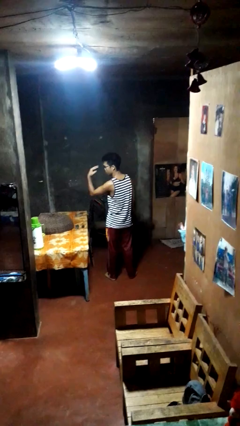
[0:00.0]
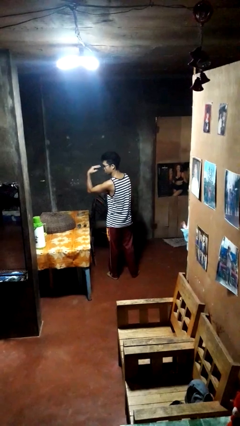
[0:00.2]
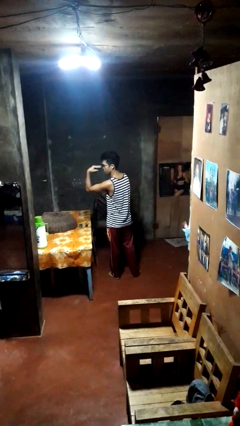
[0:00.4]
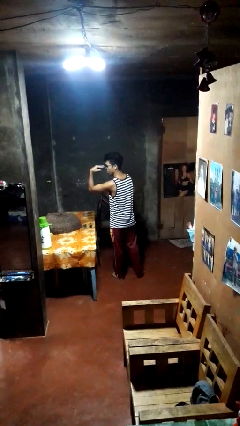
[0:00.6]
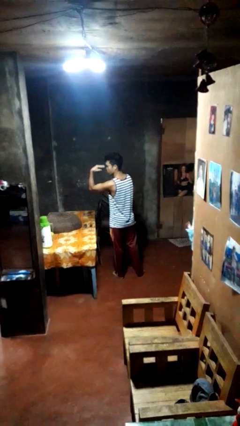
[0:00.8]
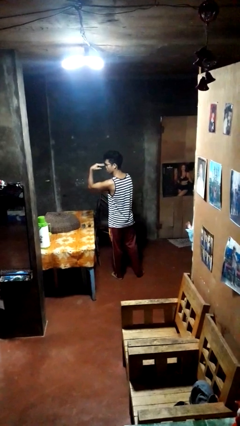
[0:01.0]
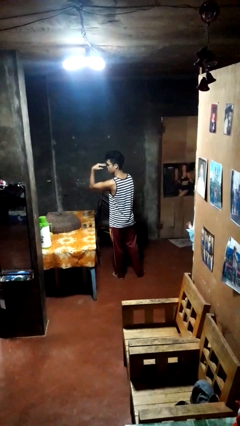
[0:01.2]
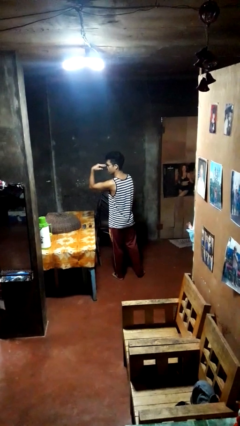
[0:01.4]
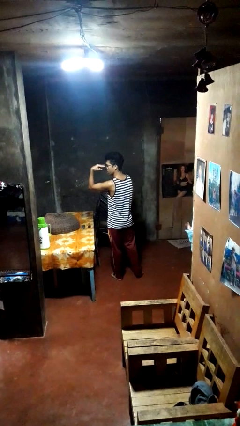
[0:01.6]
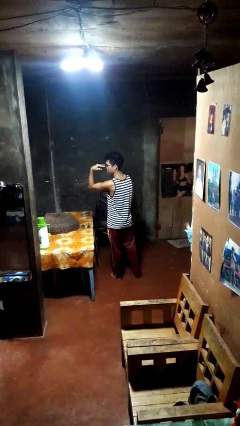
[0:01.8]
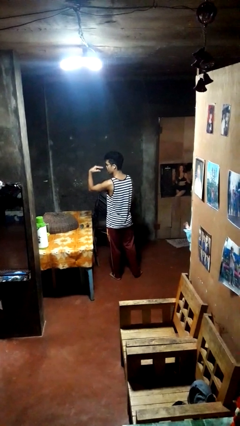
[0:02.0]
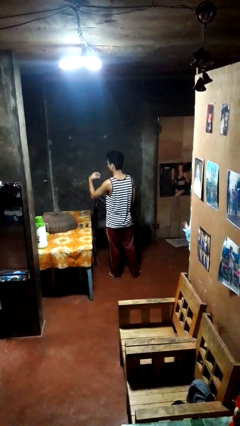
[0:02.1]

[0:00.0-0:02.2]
person gestures watch closely

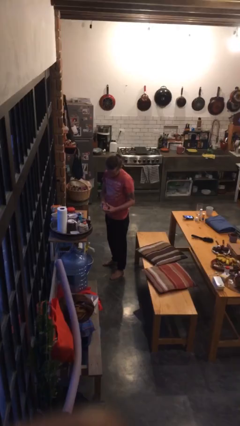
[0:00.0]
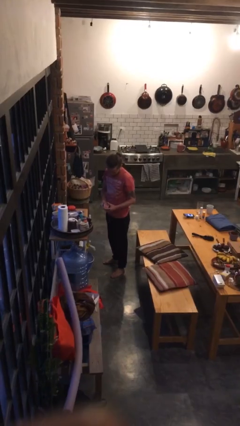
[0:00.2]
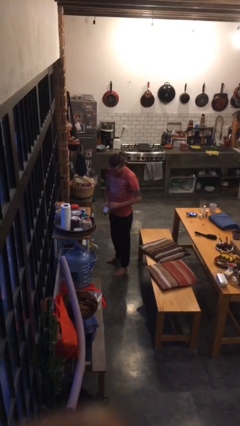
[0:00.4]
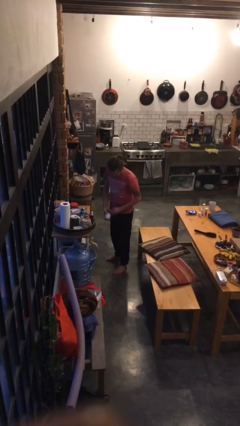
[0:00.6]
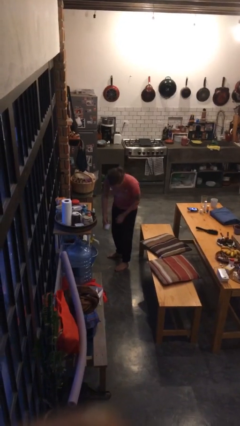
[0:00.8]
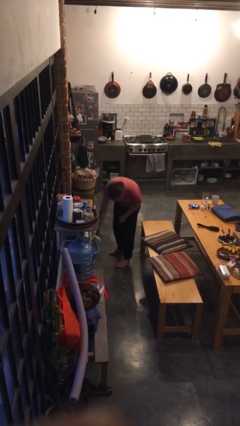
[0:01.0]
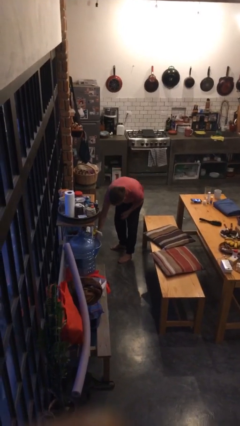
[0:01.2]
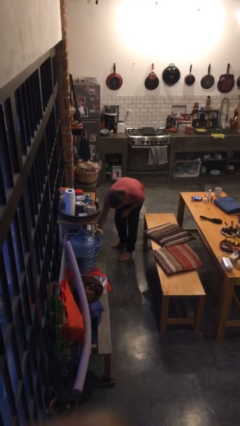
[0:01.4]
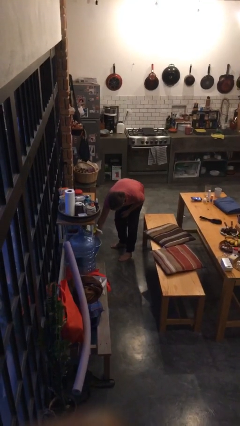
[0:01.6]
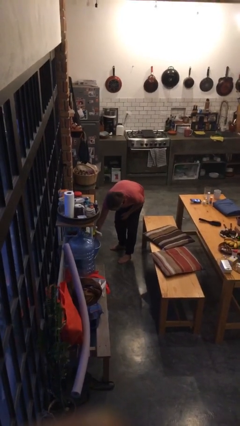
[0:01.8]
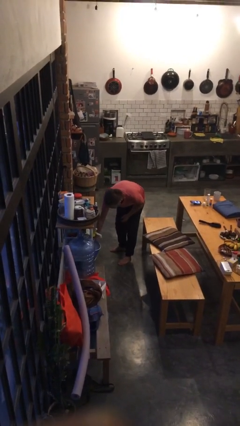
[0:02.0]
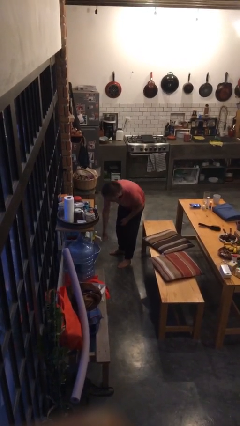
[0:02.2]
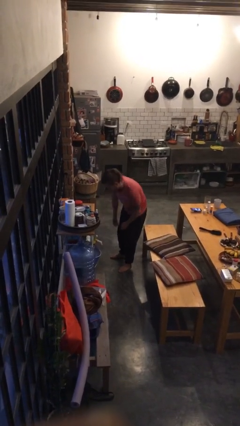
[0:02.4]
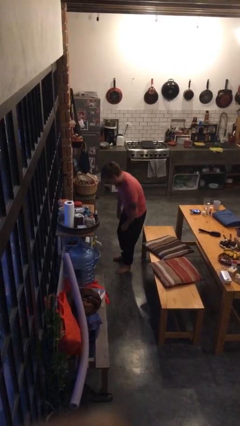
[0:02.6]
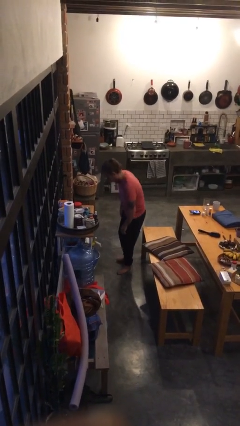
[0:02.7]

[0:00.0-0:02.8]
person puts down object into cabinet

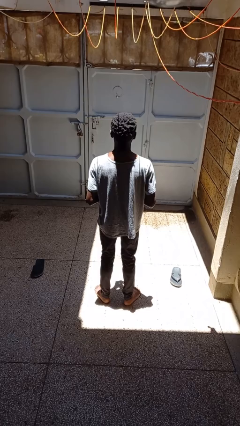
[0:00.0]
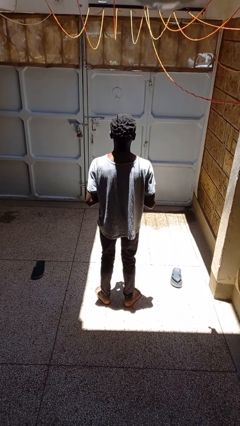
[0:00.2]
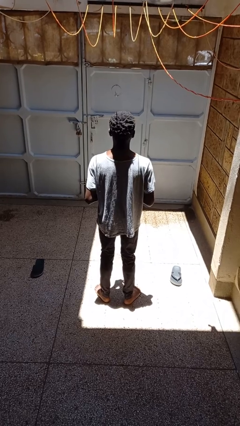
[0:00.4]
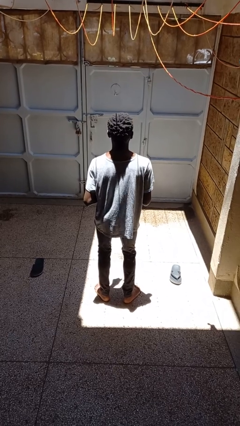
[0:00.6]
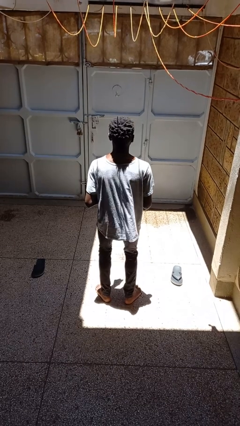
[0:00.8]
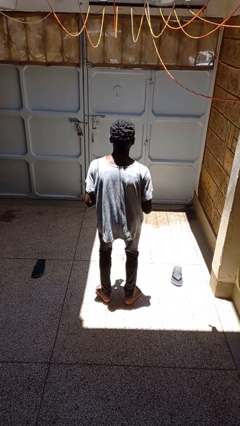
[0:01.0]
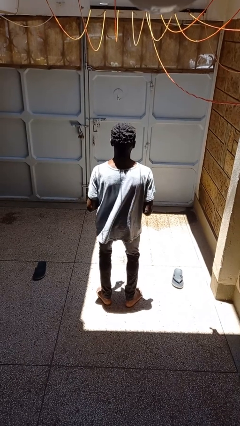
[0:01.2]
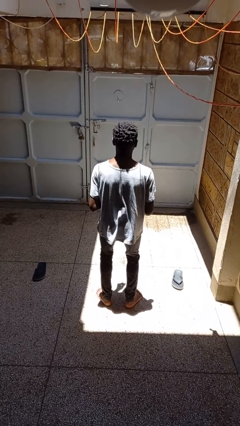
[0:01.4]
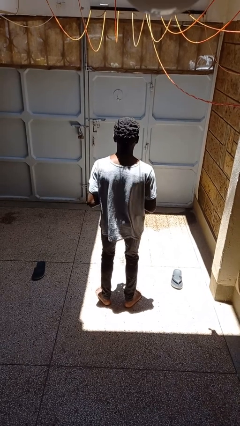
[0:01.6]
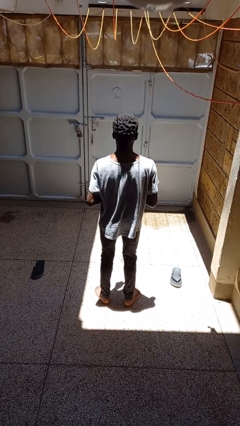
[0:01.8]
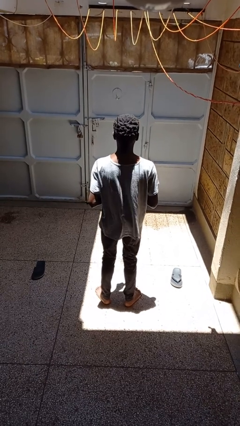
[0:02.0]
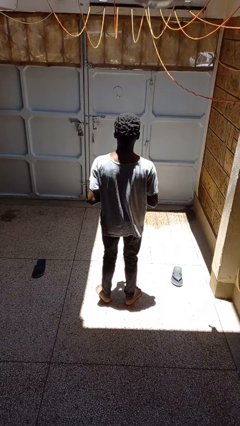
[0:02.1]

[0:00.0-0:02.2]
person dances in place

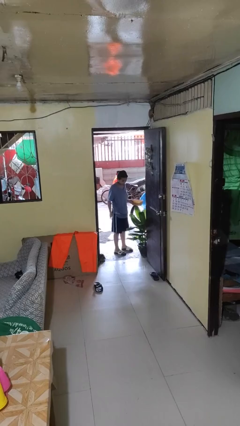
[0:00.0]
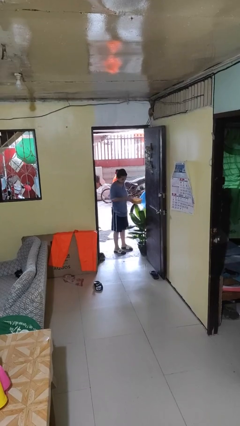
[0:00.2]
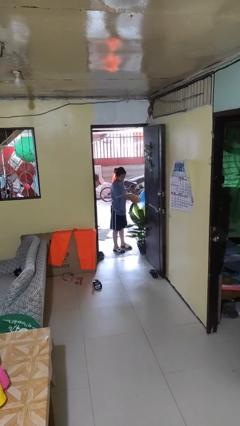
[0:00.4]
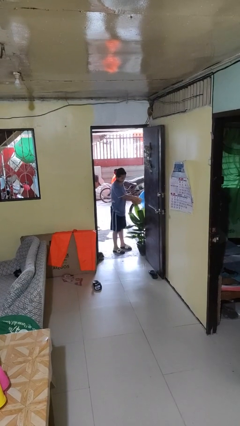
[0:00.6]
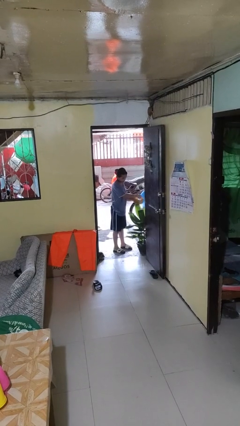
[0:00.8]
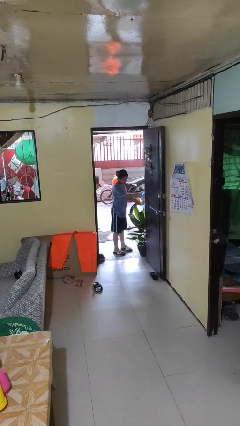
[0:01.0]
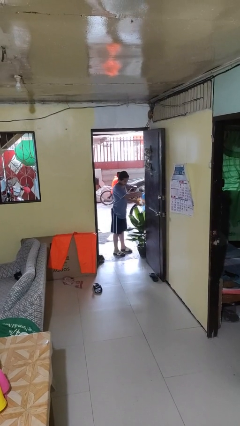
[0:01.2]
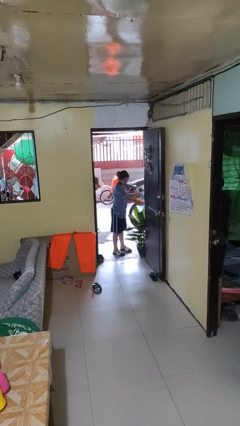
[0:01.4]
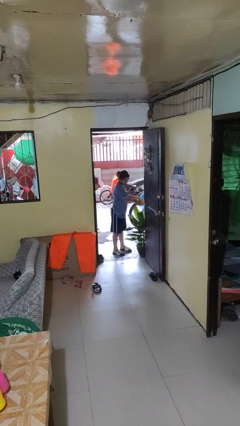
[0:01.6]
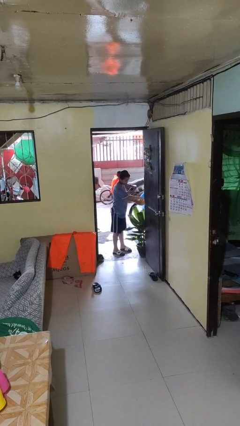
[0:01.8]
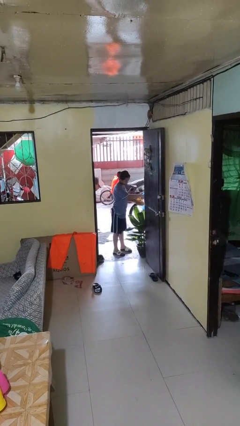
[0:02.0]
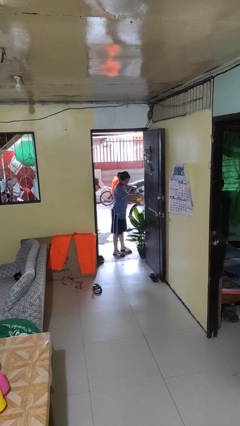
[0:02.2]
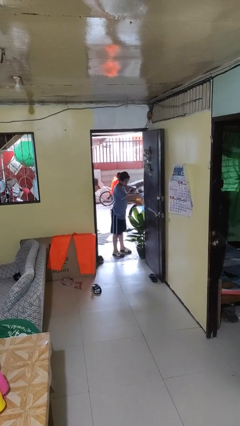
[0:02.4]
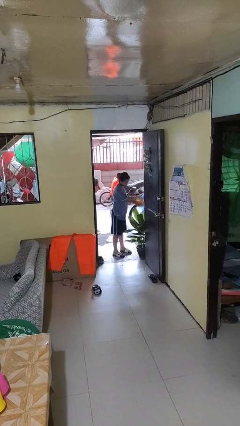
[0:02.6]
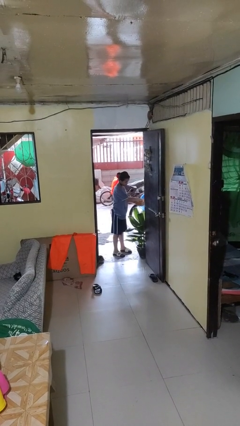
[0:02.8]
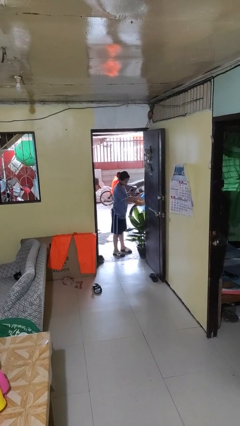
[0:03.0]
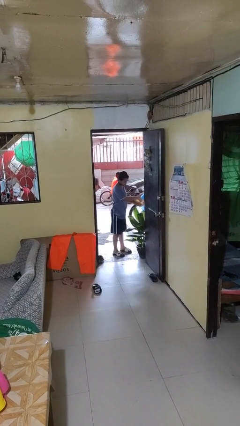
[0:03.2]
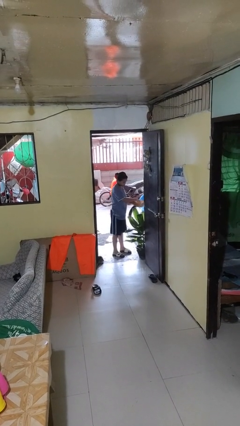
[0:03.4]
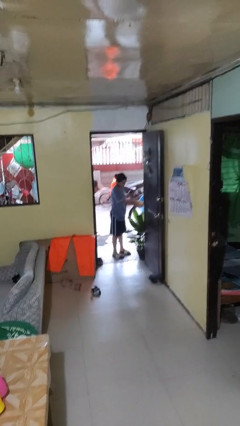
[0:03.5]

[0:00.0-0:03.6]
person waters houseplant

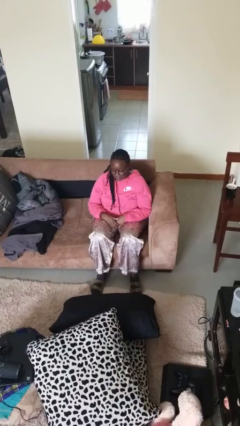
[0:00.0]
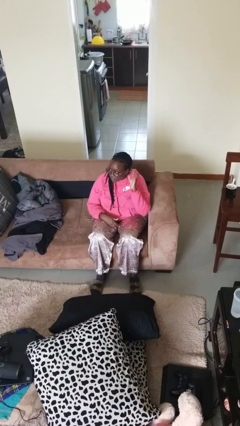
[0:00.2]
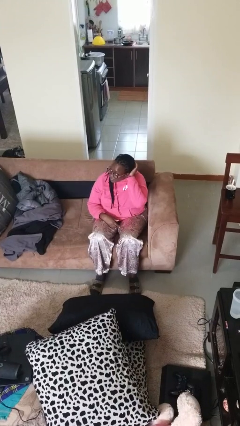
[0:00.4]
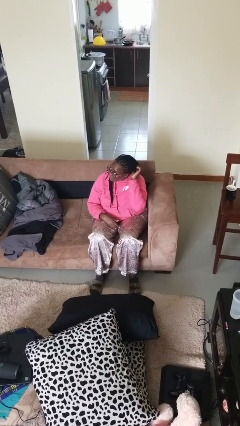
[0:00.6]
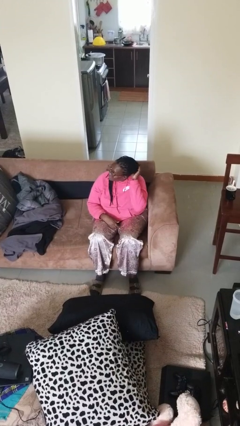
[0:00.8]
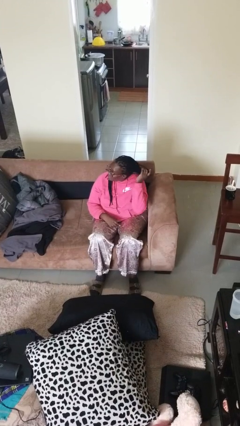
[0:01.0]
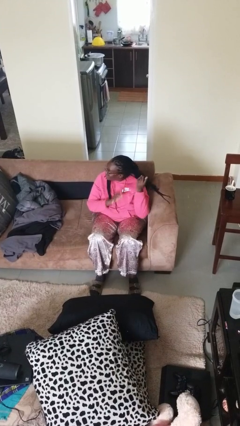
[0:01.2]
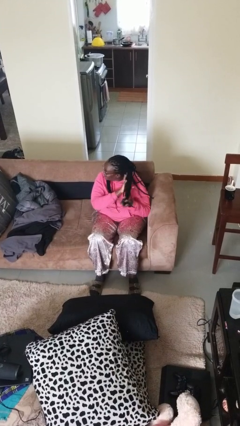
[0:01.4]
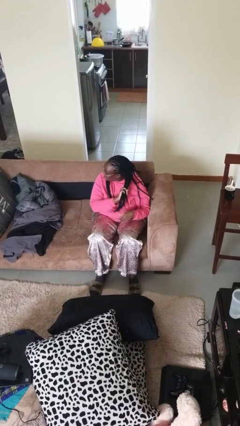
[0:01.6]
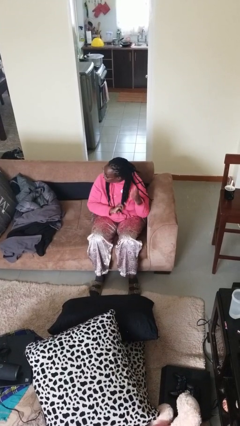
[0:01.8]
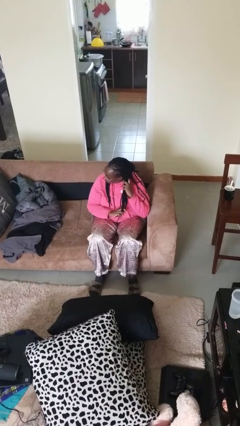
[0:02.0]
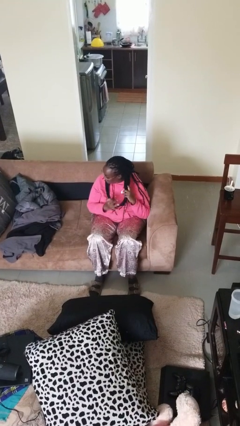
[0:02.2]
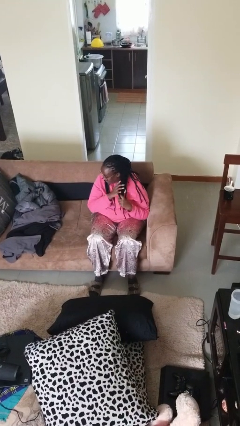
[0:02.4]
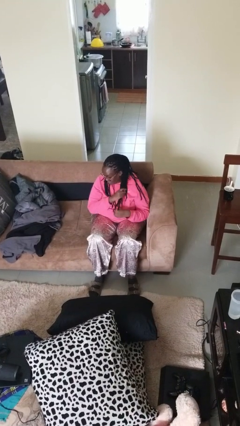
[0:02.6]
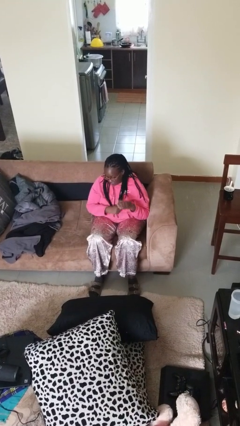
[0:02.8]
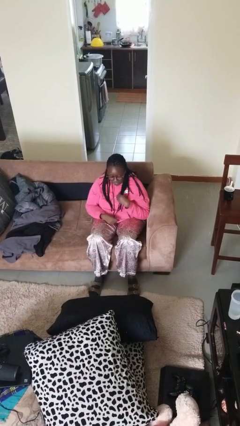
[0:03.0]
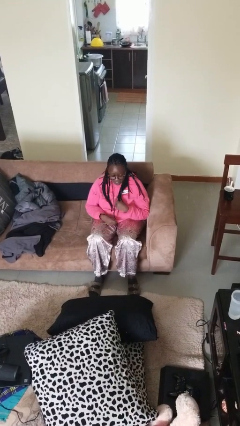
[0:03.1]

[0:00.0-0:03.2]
person strokes hair

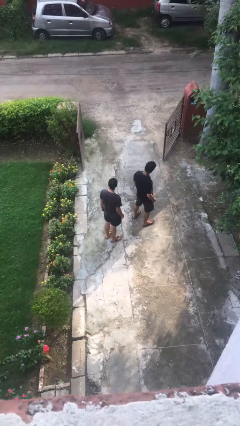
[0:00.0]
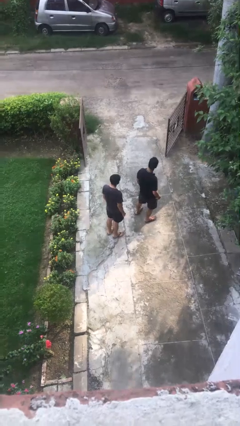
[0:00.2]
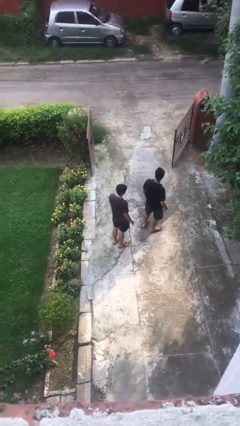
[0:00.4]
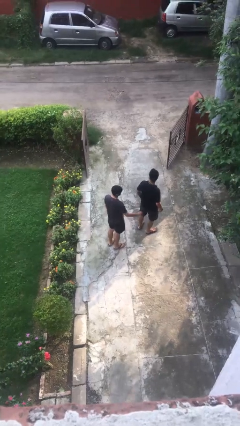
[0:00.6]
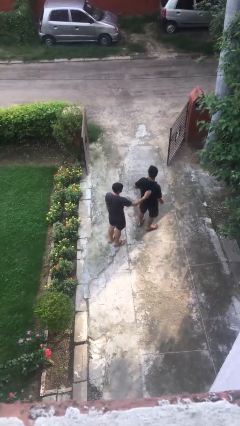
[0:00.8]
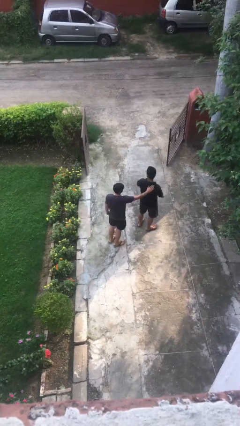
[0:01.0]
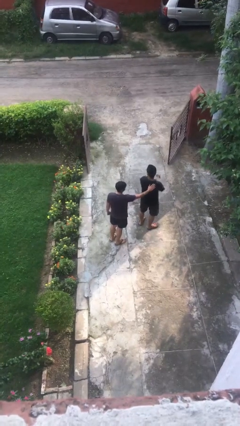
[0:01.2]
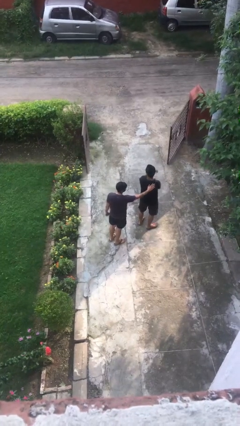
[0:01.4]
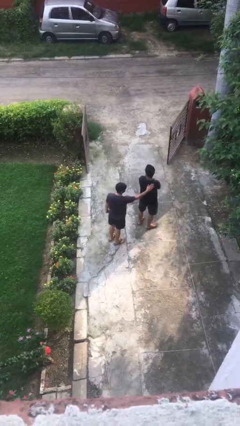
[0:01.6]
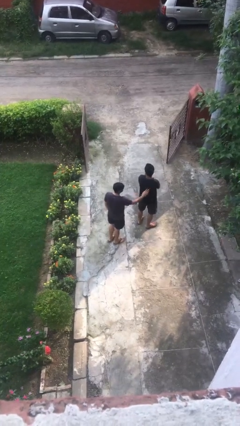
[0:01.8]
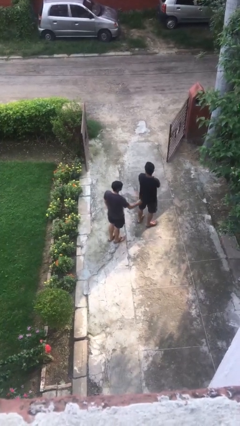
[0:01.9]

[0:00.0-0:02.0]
person touches back of person

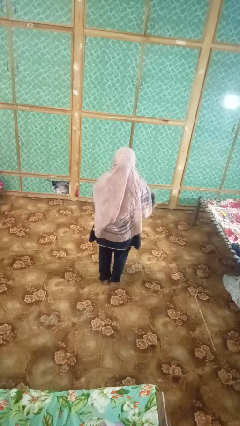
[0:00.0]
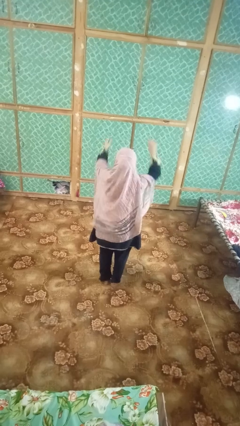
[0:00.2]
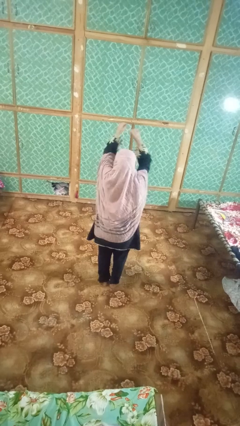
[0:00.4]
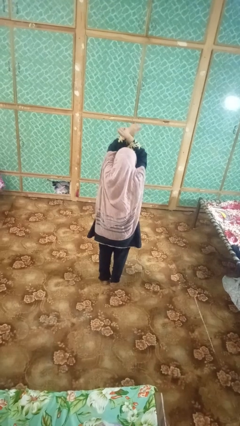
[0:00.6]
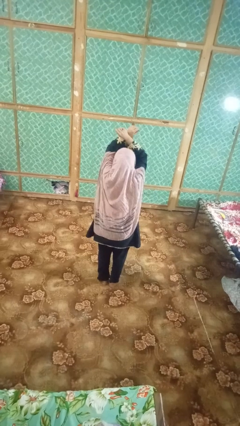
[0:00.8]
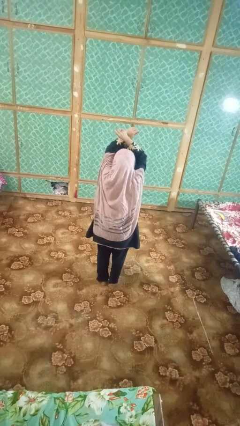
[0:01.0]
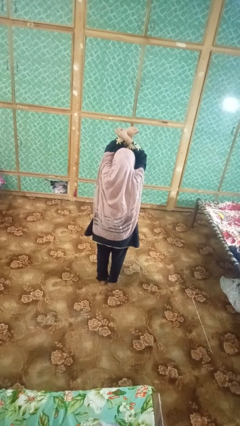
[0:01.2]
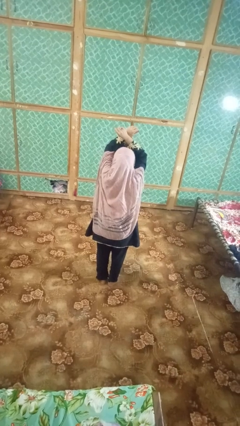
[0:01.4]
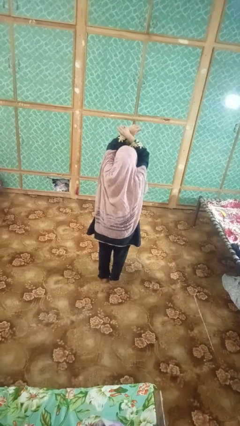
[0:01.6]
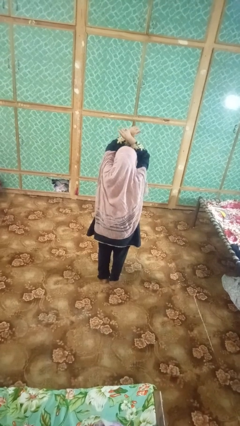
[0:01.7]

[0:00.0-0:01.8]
person gestures arms x
